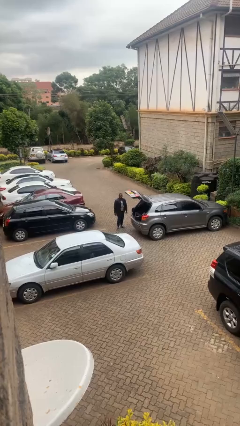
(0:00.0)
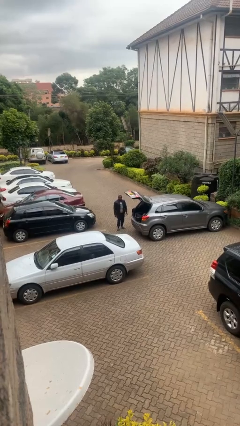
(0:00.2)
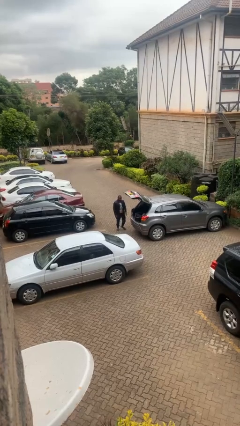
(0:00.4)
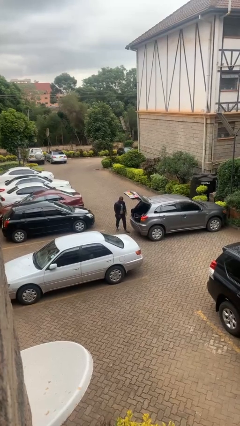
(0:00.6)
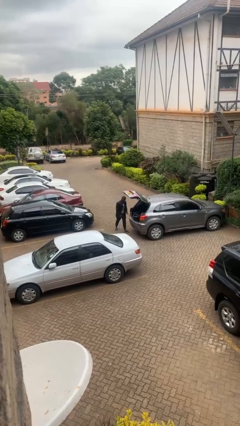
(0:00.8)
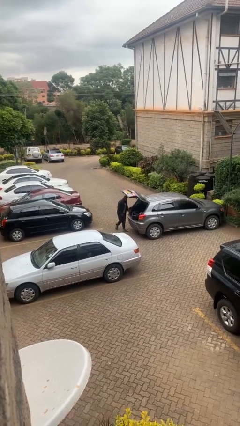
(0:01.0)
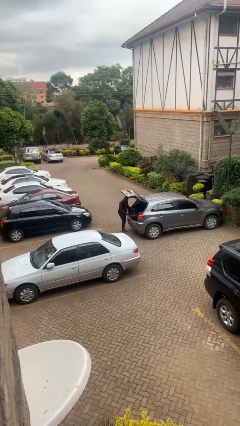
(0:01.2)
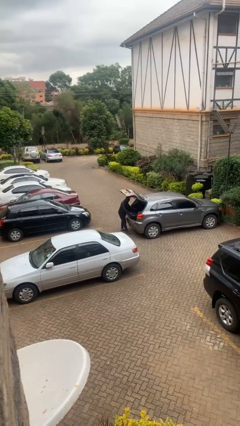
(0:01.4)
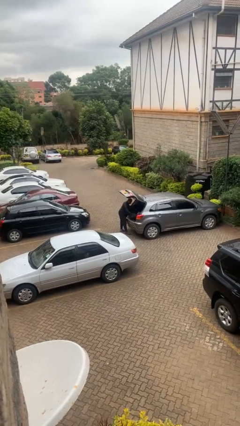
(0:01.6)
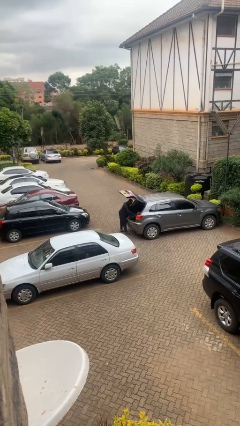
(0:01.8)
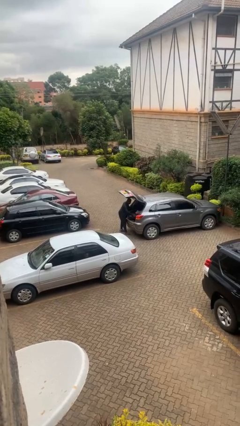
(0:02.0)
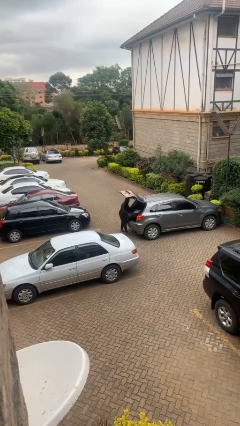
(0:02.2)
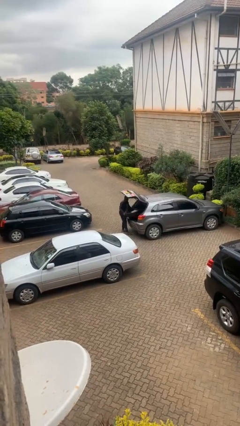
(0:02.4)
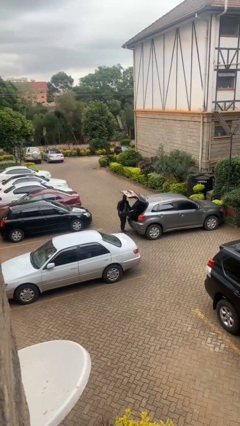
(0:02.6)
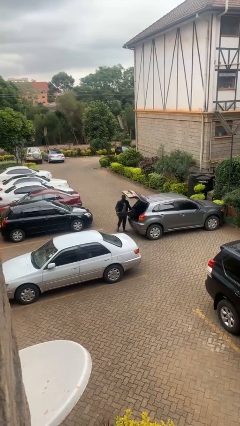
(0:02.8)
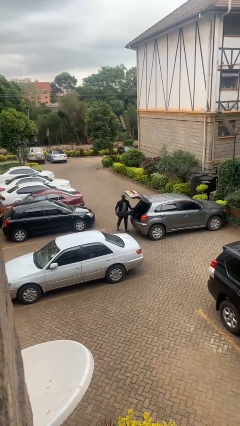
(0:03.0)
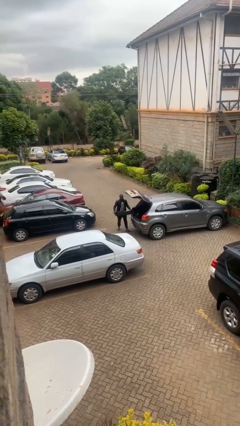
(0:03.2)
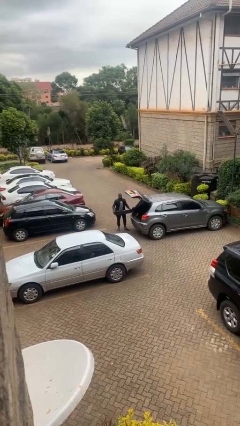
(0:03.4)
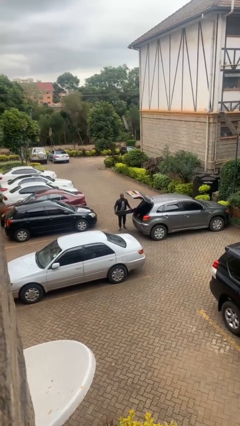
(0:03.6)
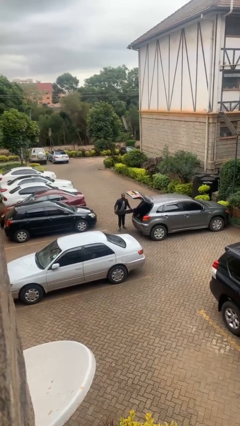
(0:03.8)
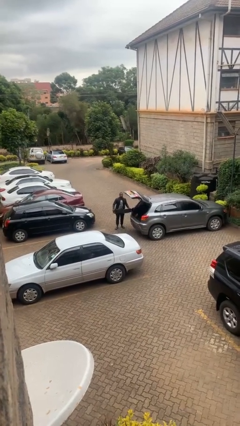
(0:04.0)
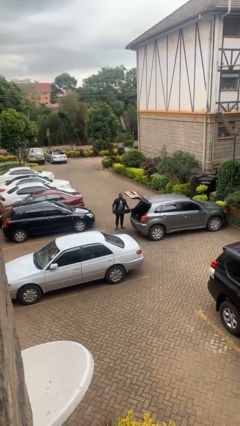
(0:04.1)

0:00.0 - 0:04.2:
person unloads car

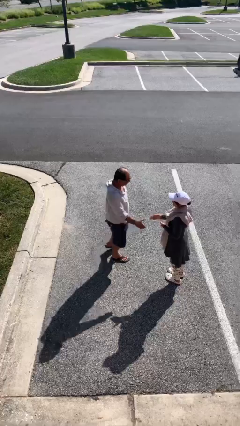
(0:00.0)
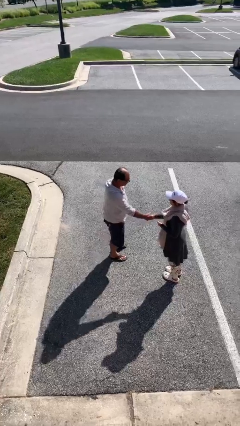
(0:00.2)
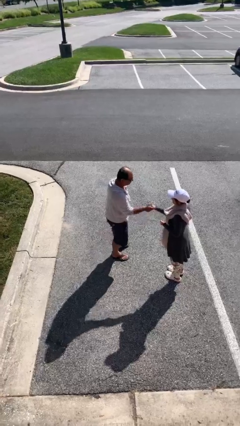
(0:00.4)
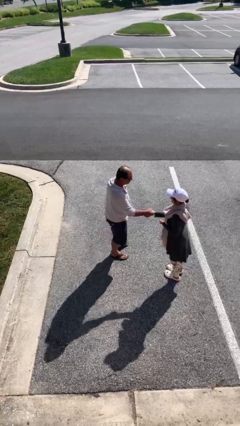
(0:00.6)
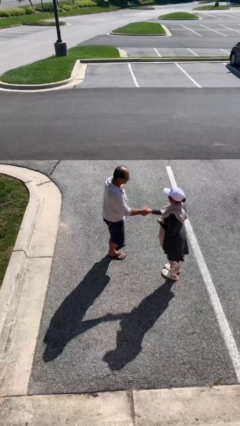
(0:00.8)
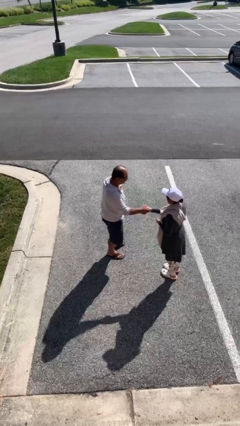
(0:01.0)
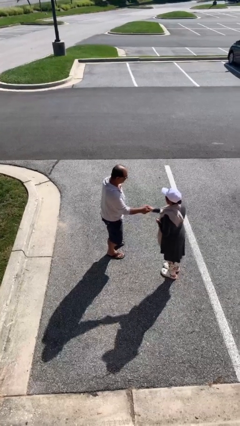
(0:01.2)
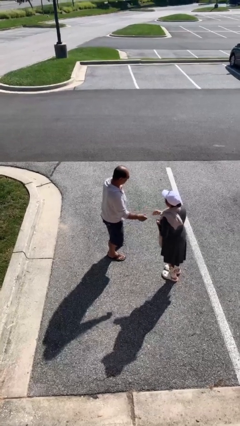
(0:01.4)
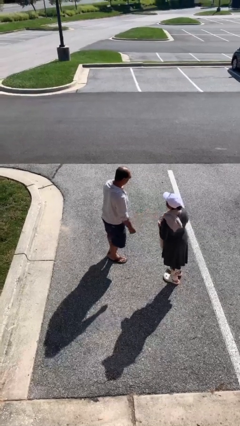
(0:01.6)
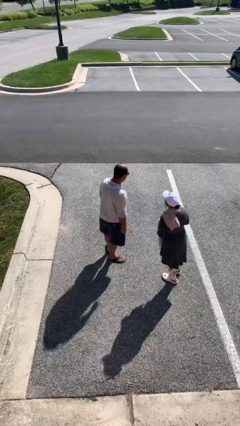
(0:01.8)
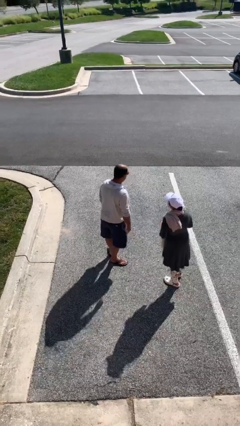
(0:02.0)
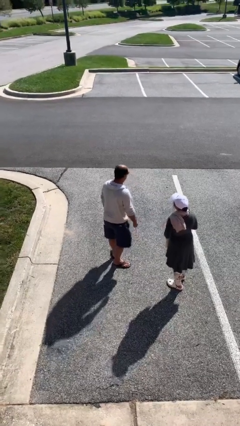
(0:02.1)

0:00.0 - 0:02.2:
person shakes hand

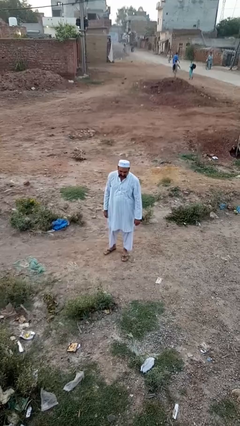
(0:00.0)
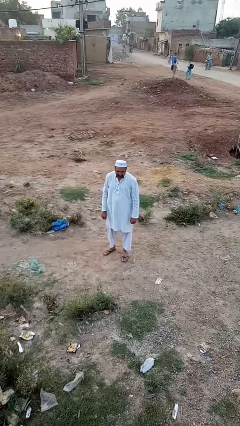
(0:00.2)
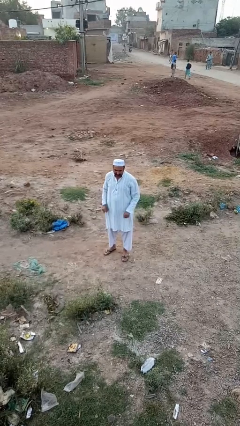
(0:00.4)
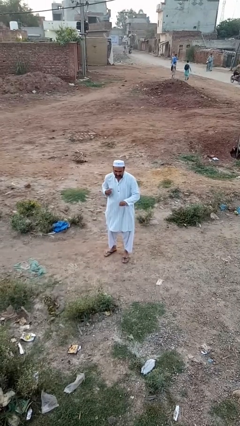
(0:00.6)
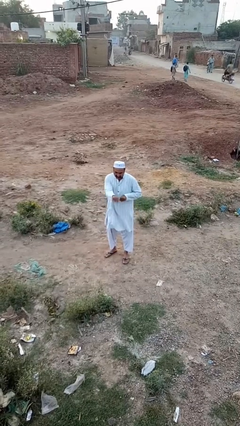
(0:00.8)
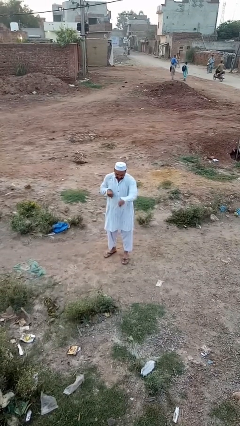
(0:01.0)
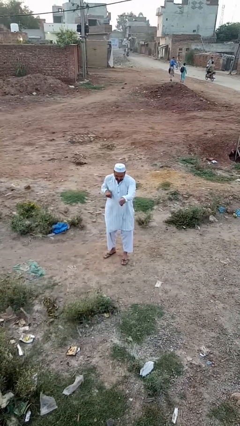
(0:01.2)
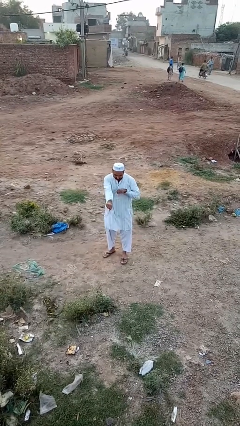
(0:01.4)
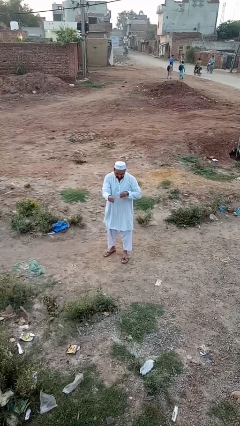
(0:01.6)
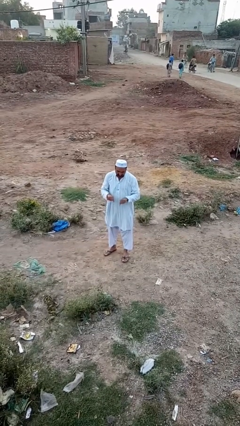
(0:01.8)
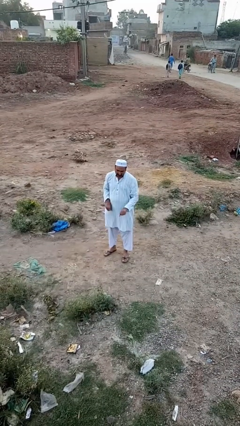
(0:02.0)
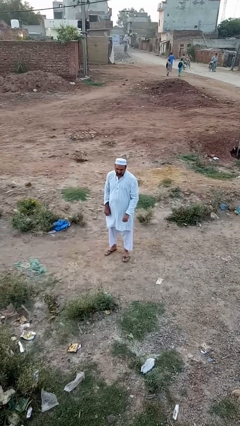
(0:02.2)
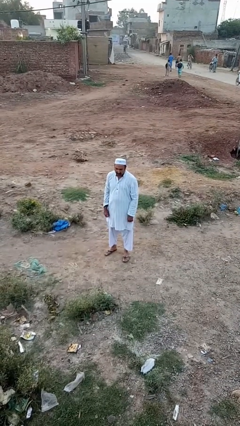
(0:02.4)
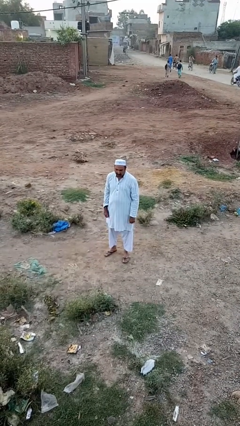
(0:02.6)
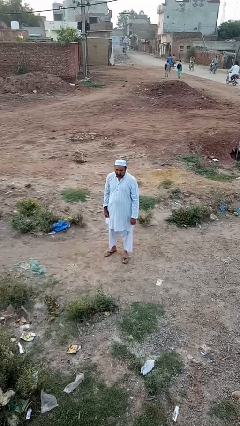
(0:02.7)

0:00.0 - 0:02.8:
person punches

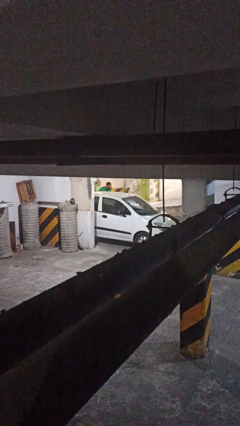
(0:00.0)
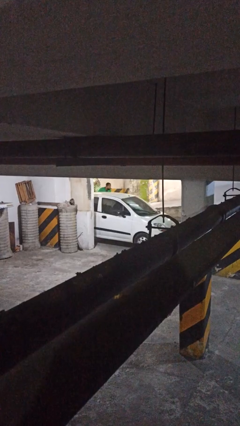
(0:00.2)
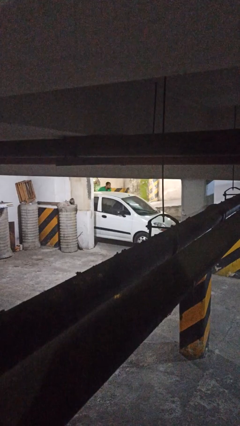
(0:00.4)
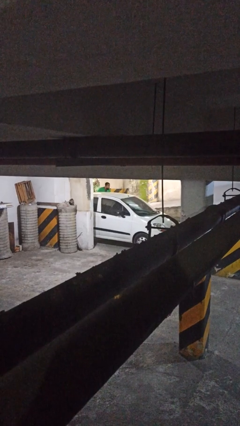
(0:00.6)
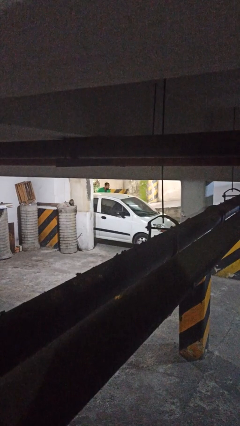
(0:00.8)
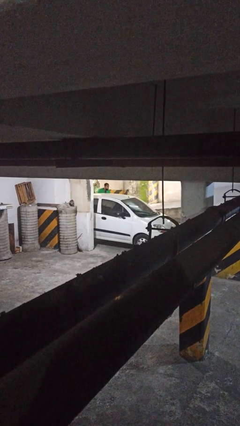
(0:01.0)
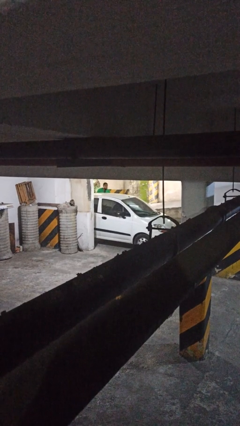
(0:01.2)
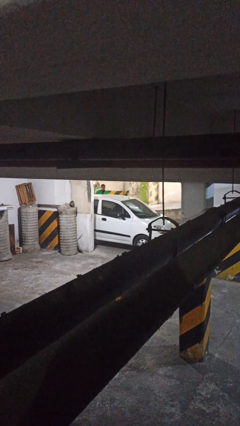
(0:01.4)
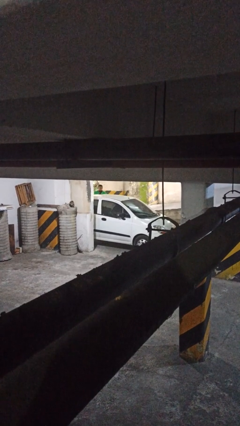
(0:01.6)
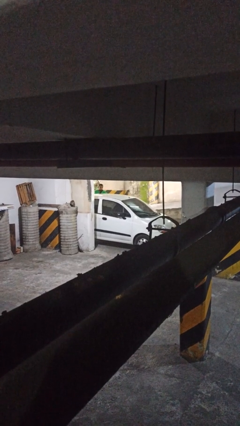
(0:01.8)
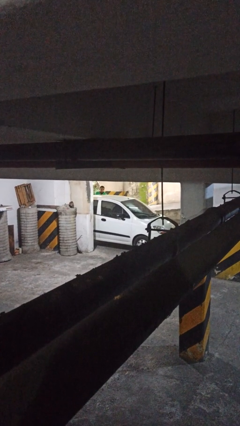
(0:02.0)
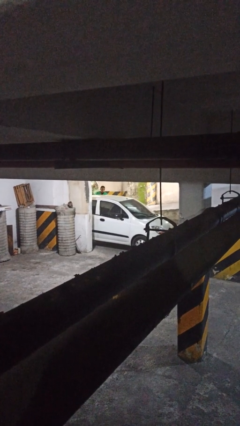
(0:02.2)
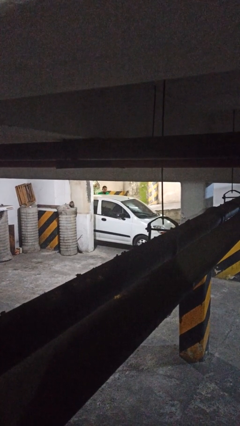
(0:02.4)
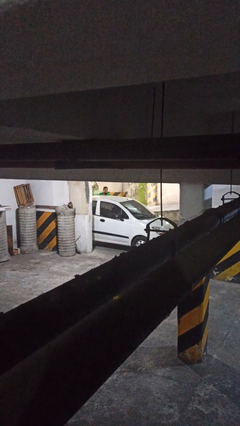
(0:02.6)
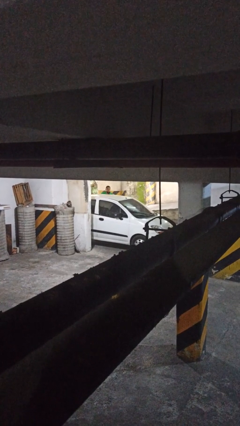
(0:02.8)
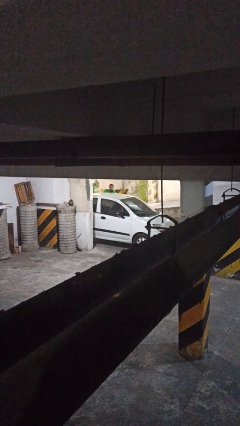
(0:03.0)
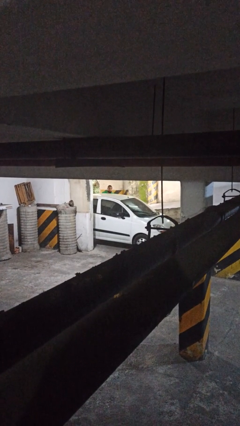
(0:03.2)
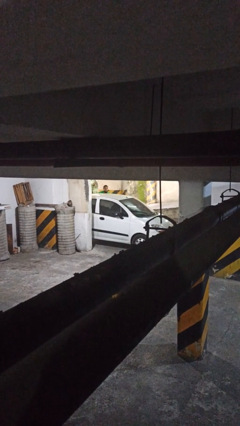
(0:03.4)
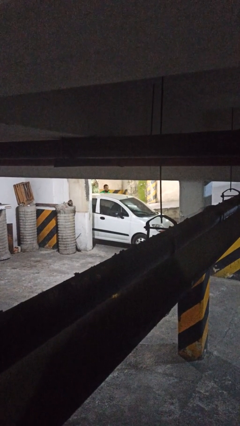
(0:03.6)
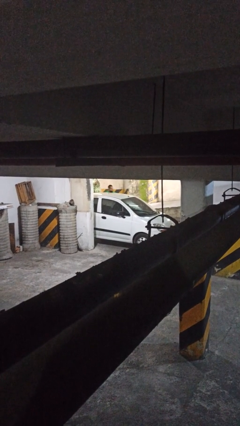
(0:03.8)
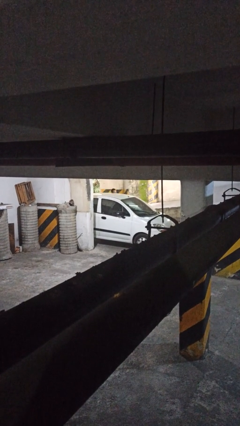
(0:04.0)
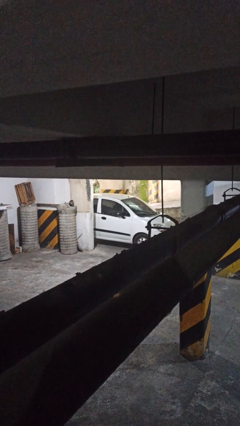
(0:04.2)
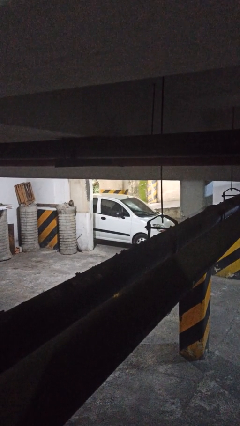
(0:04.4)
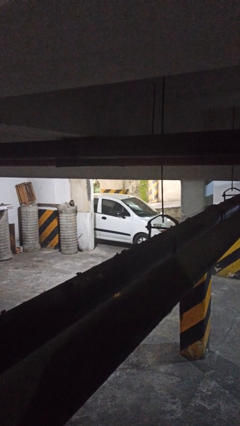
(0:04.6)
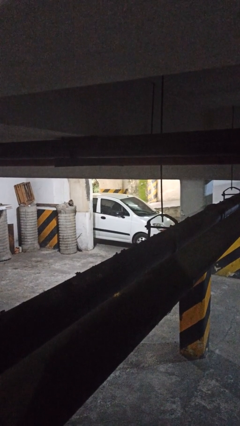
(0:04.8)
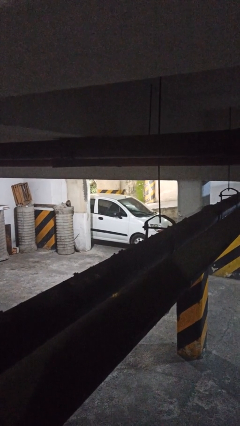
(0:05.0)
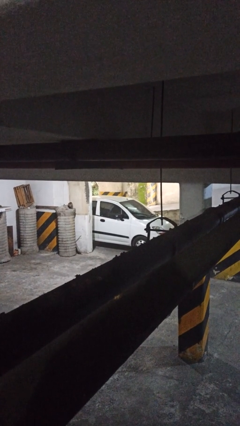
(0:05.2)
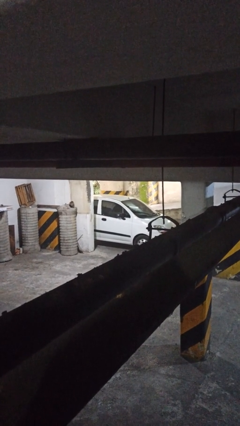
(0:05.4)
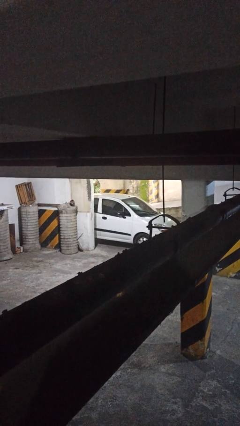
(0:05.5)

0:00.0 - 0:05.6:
car picks up person

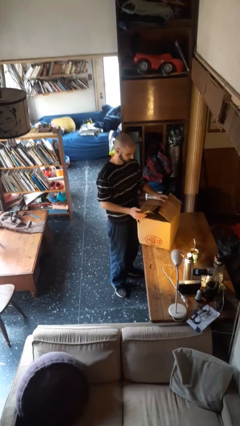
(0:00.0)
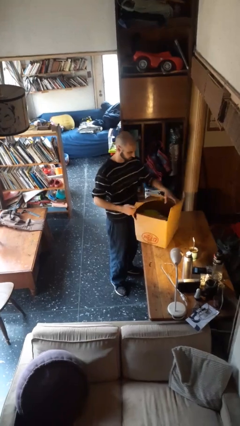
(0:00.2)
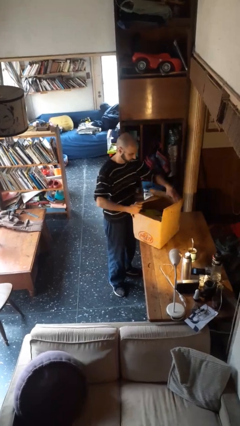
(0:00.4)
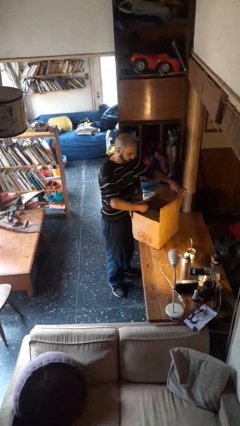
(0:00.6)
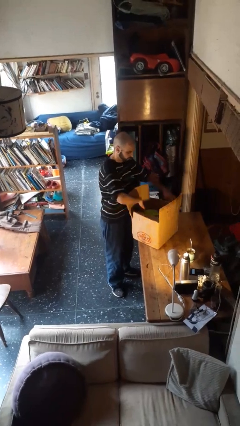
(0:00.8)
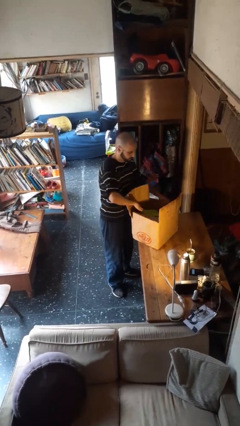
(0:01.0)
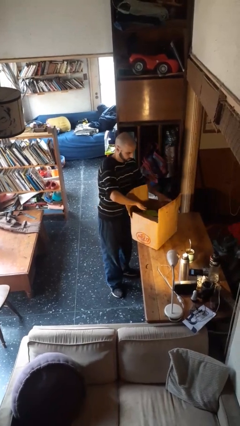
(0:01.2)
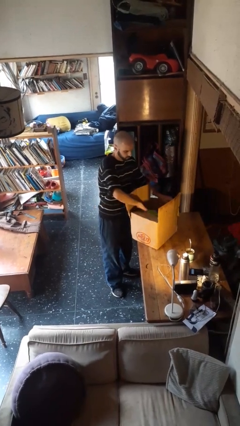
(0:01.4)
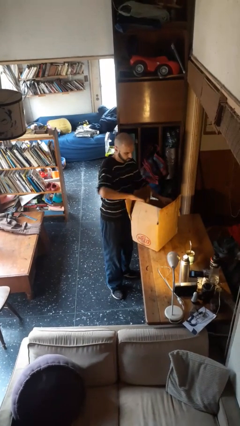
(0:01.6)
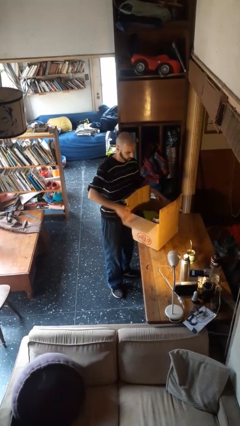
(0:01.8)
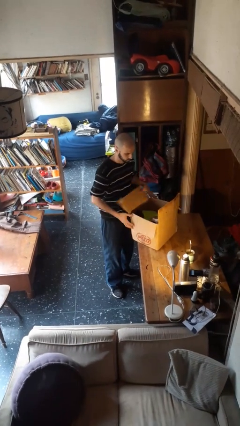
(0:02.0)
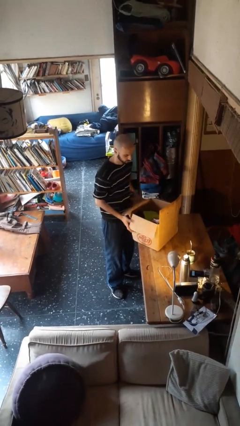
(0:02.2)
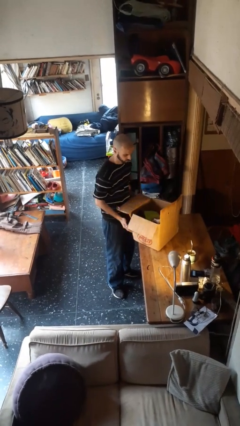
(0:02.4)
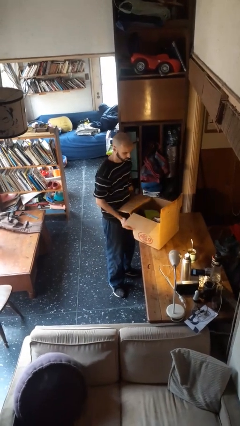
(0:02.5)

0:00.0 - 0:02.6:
person opens box

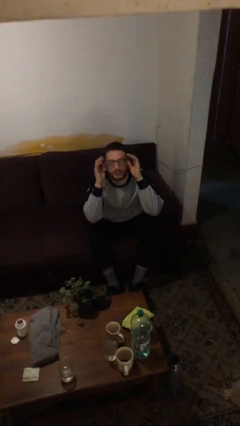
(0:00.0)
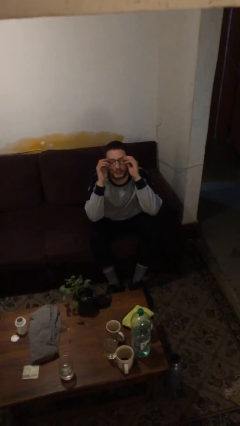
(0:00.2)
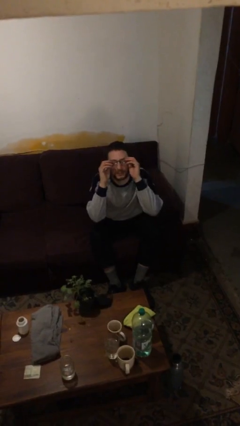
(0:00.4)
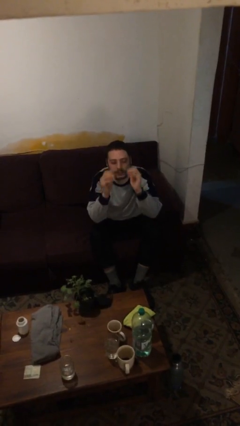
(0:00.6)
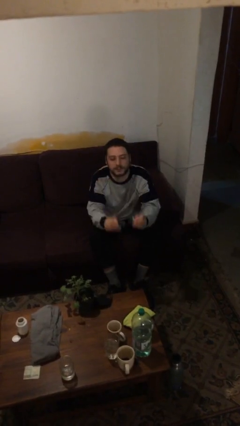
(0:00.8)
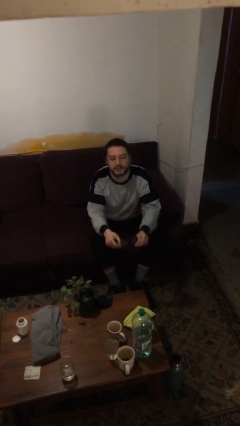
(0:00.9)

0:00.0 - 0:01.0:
person takes off glasses
